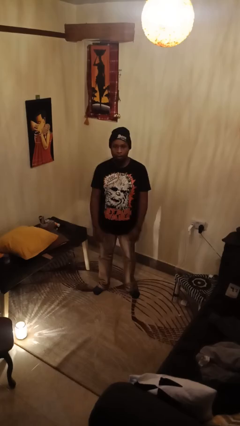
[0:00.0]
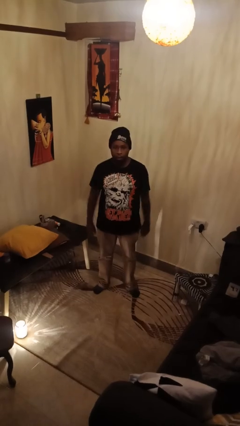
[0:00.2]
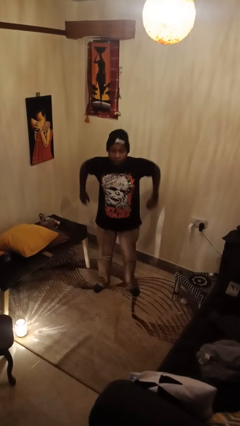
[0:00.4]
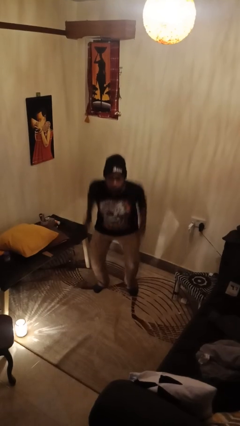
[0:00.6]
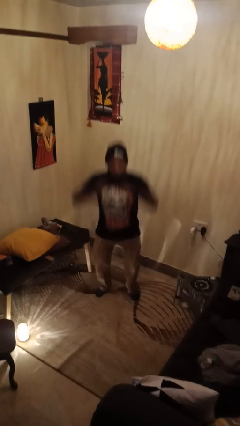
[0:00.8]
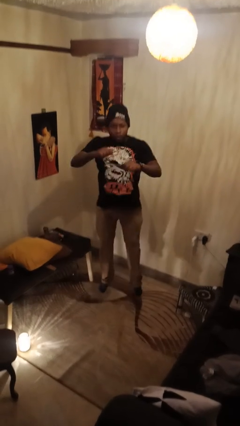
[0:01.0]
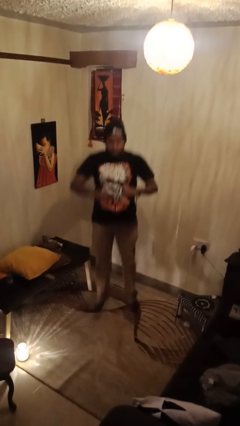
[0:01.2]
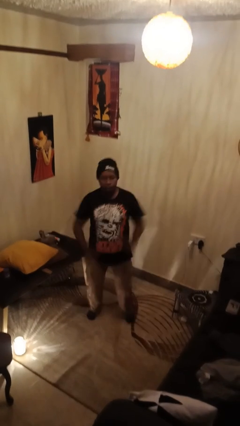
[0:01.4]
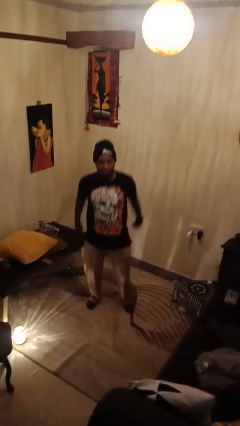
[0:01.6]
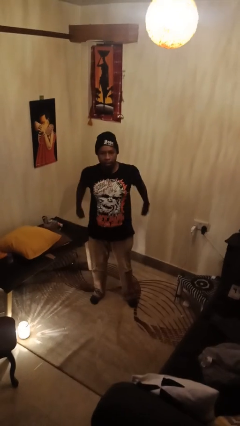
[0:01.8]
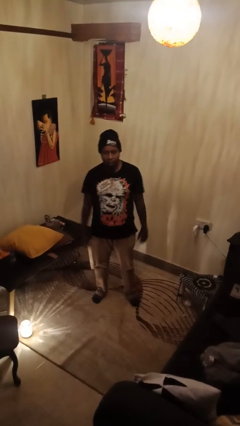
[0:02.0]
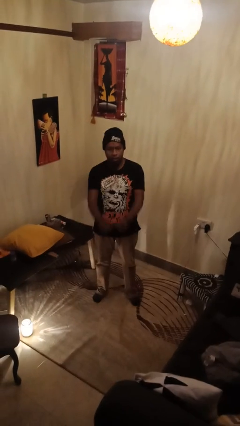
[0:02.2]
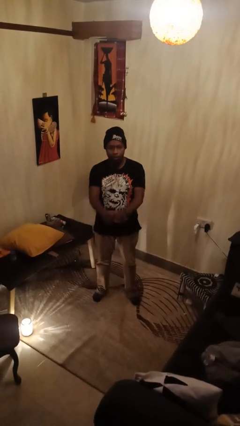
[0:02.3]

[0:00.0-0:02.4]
person jumps

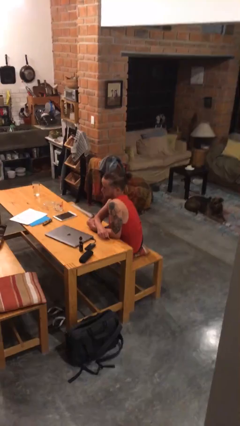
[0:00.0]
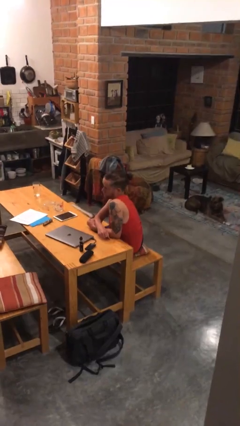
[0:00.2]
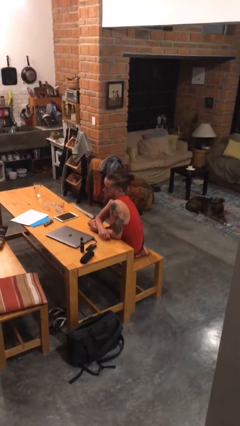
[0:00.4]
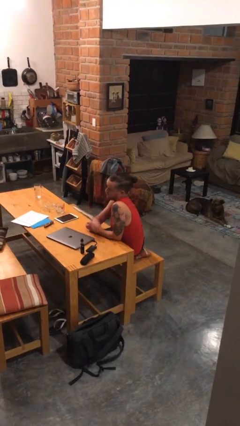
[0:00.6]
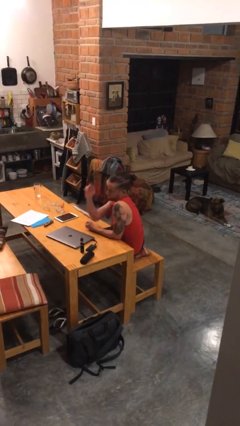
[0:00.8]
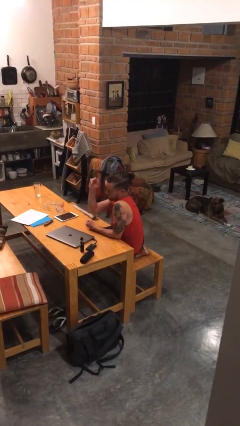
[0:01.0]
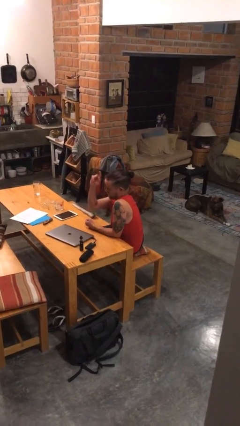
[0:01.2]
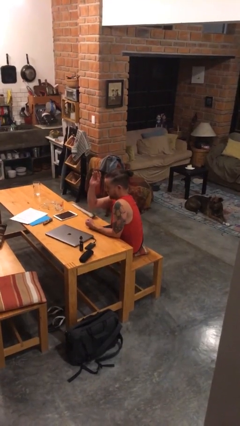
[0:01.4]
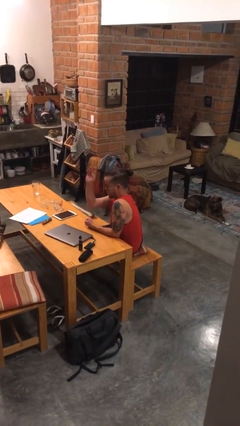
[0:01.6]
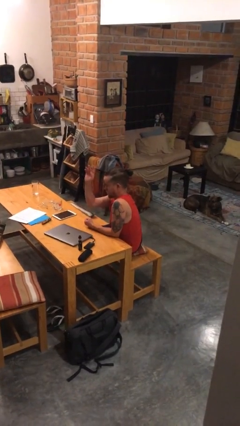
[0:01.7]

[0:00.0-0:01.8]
person gestures raise hand

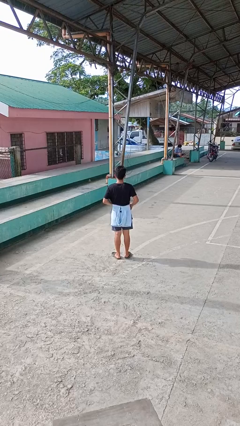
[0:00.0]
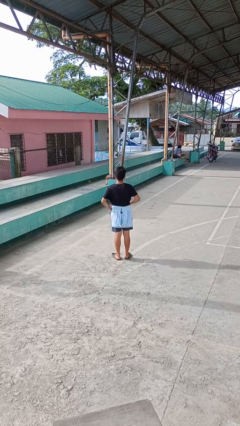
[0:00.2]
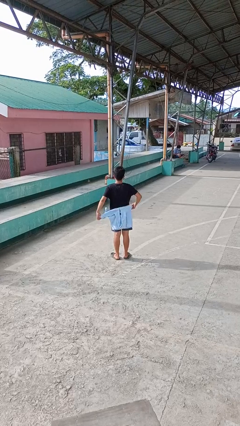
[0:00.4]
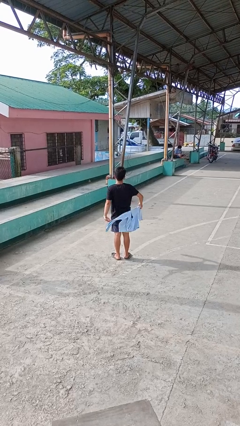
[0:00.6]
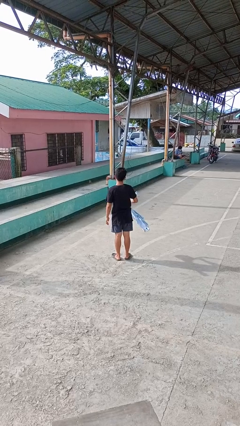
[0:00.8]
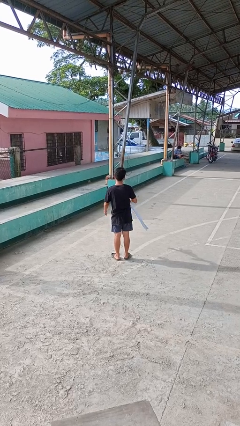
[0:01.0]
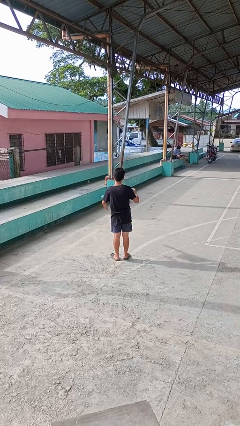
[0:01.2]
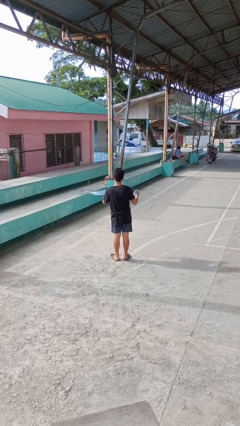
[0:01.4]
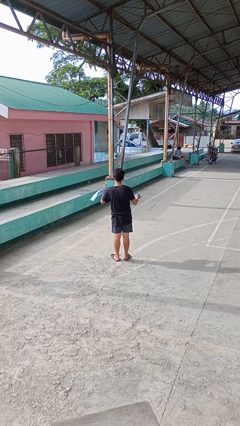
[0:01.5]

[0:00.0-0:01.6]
person unties jacket around waist

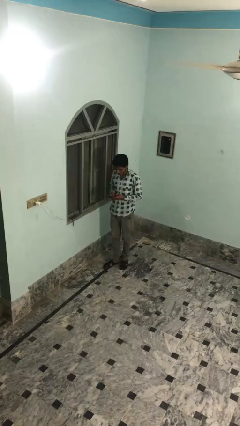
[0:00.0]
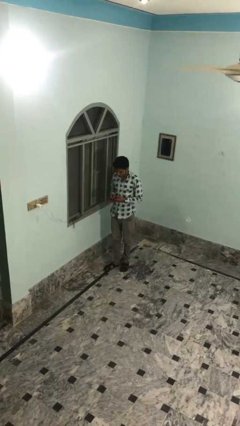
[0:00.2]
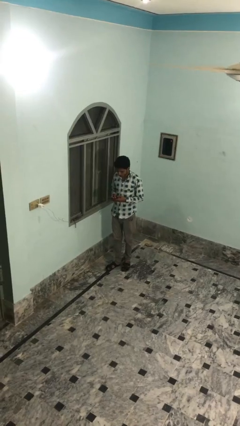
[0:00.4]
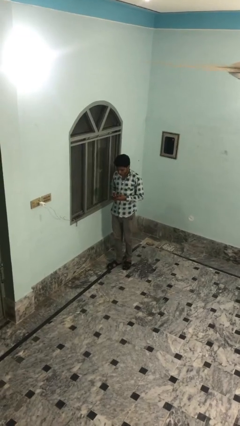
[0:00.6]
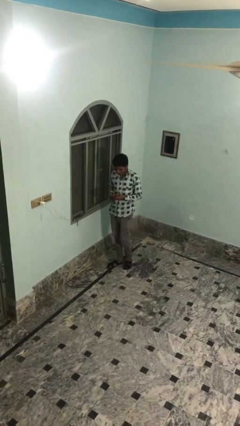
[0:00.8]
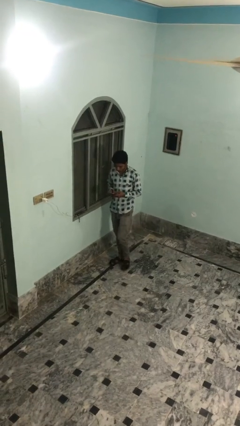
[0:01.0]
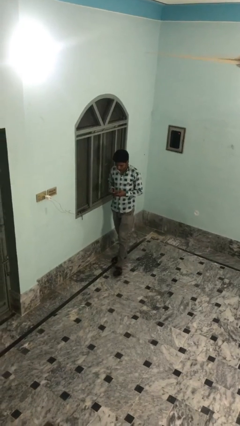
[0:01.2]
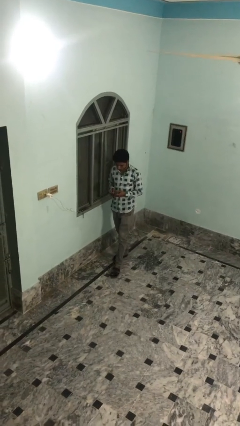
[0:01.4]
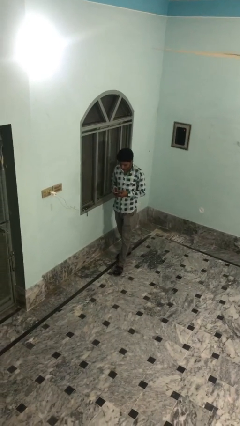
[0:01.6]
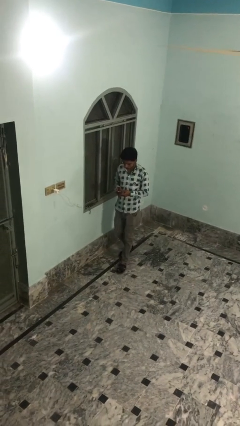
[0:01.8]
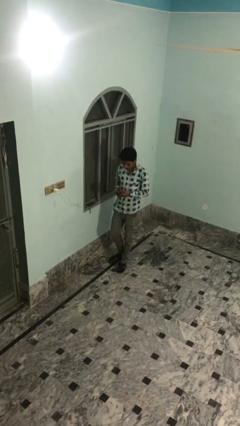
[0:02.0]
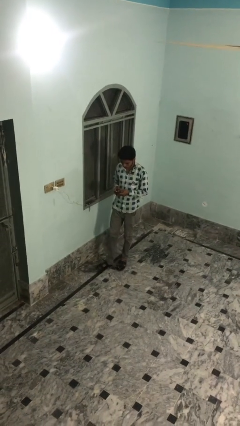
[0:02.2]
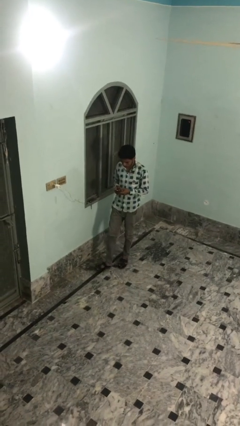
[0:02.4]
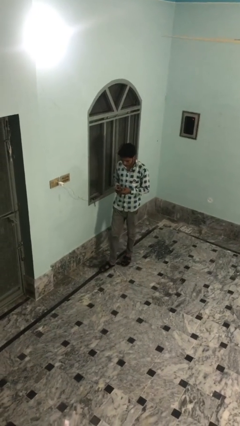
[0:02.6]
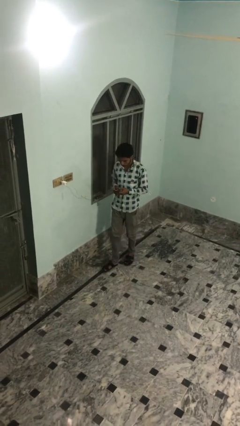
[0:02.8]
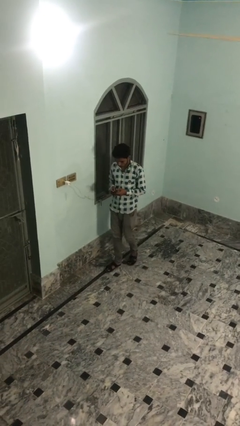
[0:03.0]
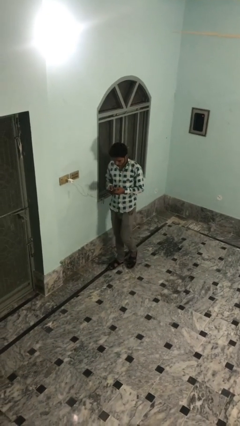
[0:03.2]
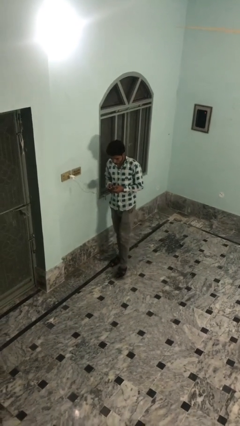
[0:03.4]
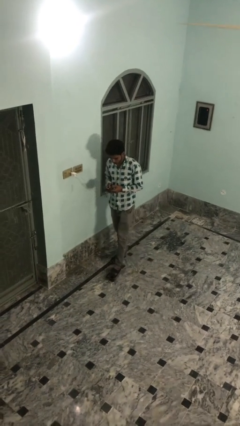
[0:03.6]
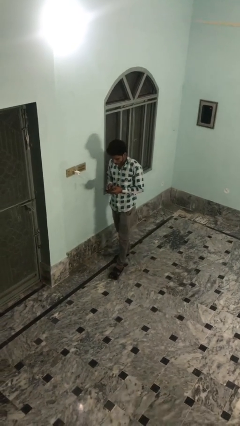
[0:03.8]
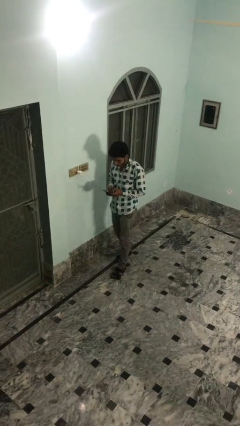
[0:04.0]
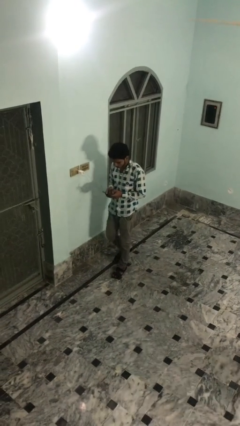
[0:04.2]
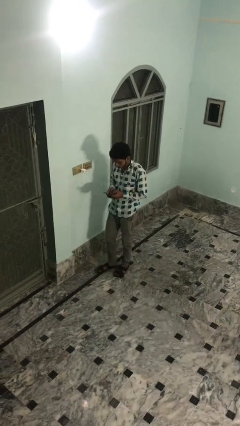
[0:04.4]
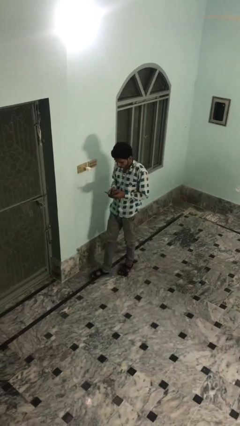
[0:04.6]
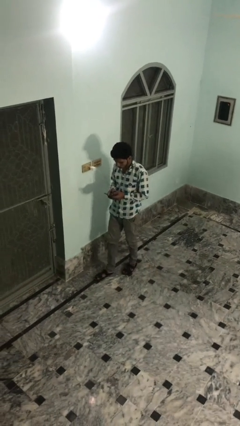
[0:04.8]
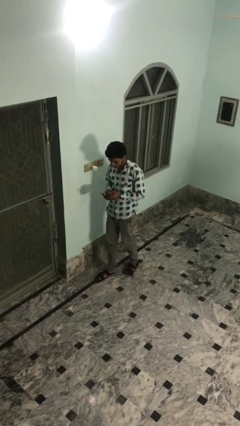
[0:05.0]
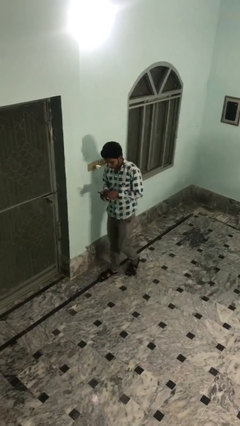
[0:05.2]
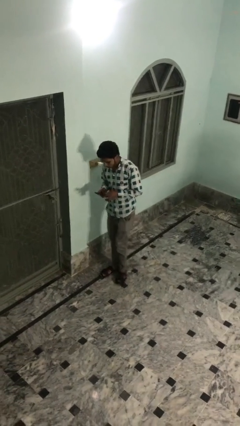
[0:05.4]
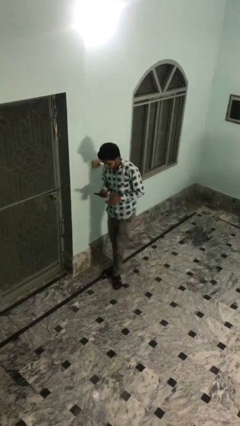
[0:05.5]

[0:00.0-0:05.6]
person texts on phone

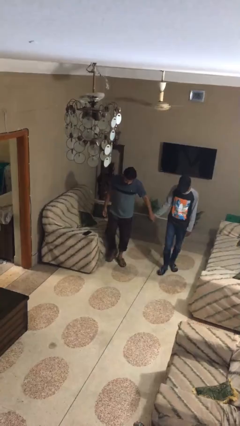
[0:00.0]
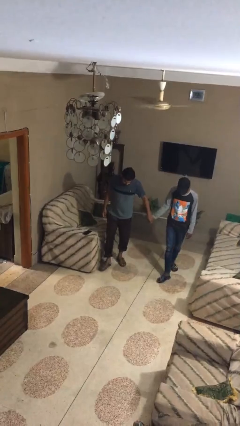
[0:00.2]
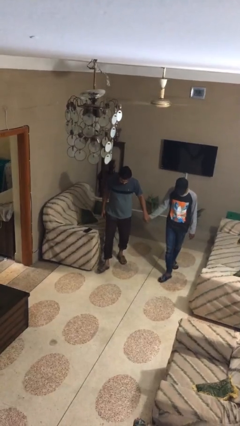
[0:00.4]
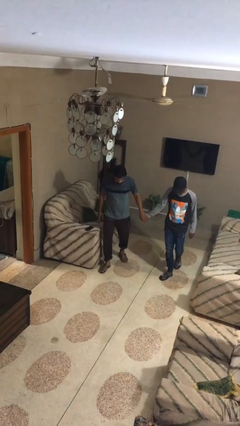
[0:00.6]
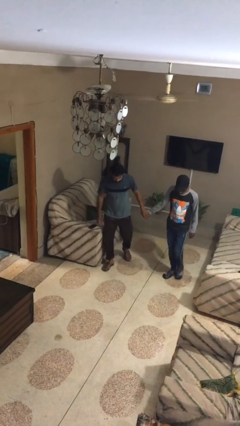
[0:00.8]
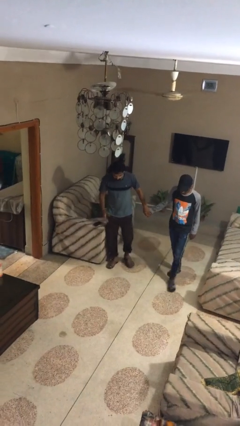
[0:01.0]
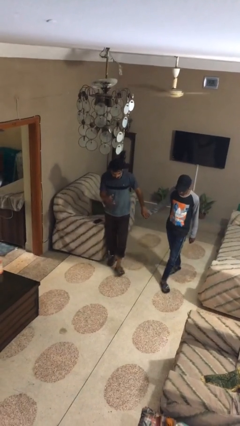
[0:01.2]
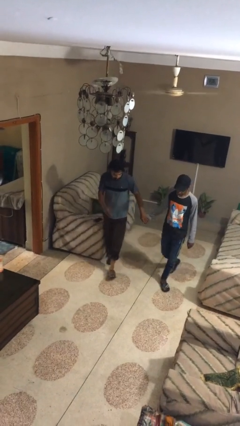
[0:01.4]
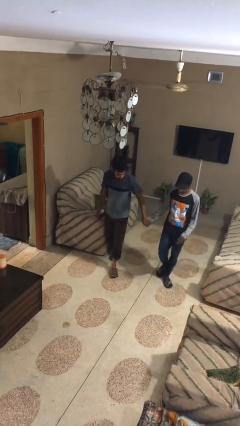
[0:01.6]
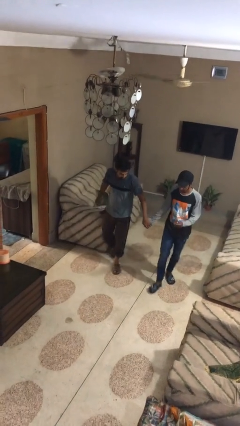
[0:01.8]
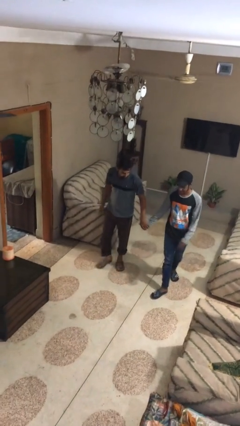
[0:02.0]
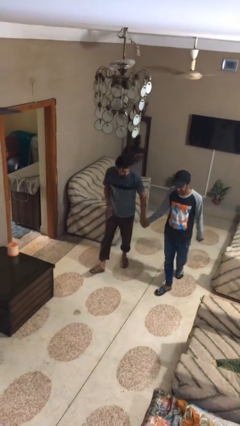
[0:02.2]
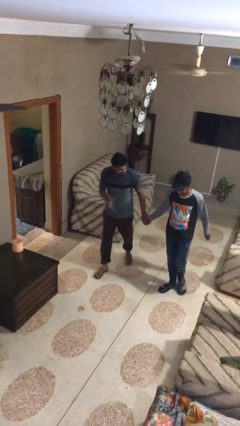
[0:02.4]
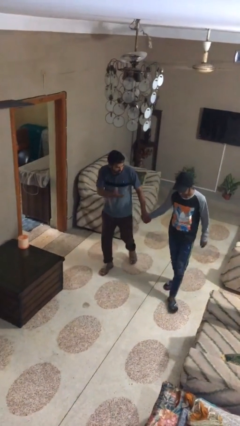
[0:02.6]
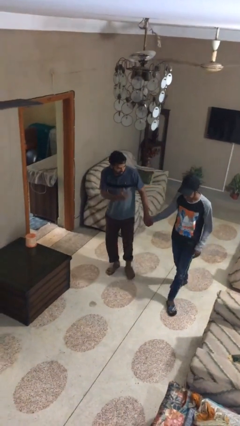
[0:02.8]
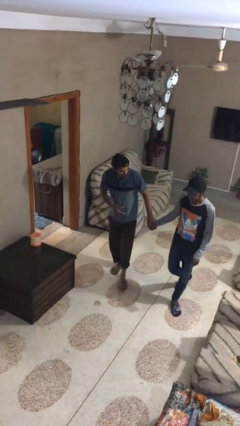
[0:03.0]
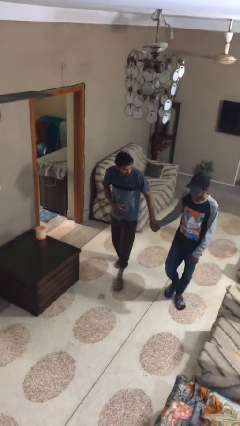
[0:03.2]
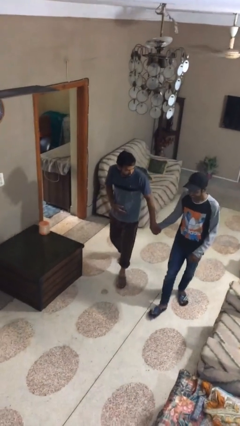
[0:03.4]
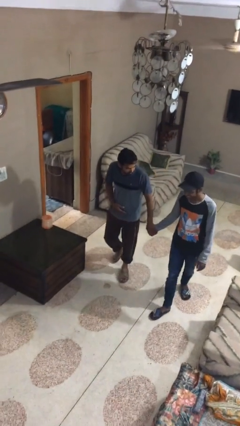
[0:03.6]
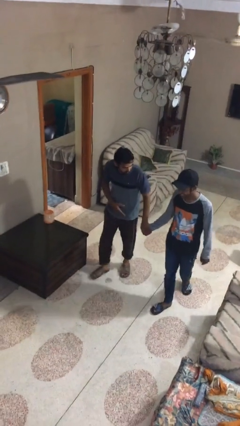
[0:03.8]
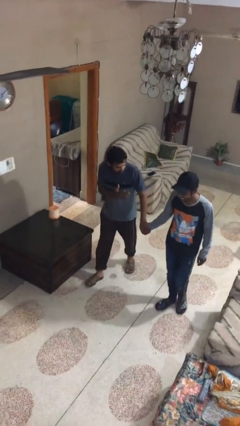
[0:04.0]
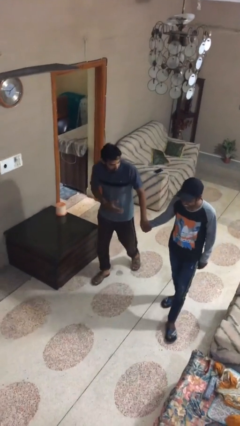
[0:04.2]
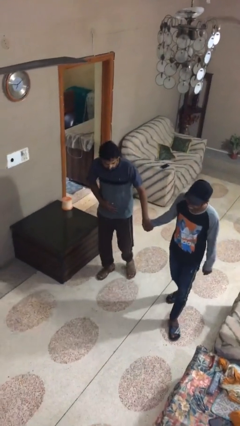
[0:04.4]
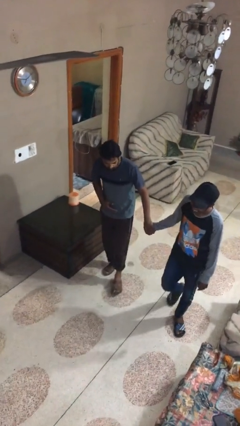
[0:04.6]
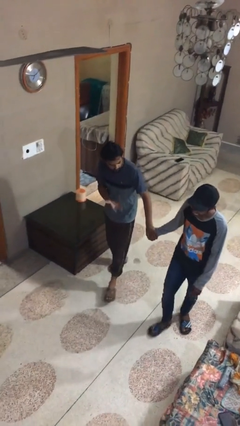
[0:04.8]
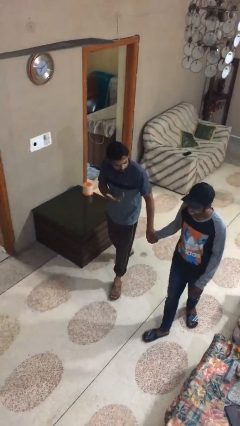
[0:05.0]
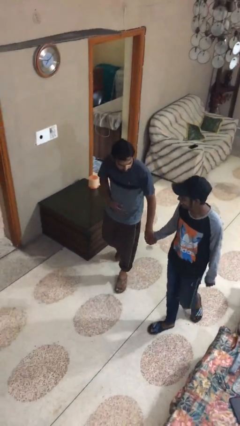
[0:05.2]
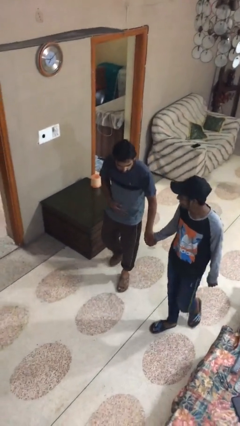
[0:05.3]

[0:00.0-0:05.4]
person holds hand

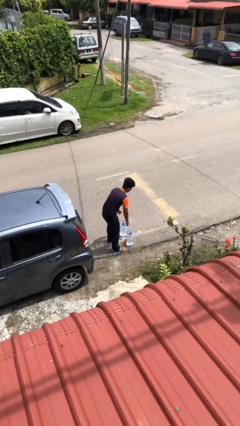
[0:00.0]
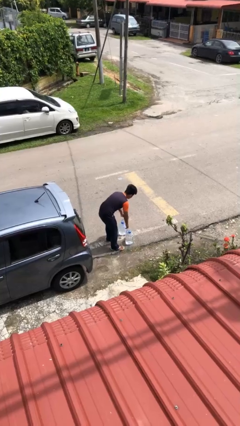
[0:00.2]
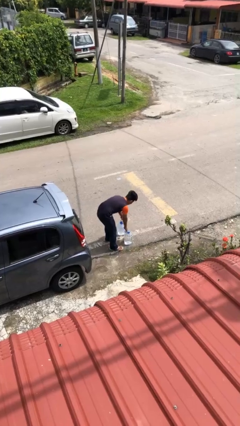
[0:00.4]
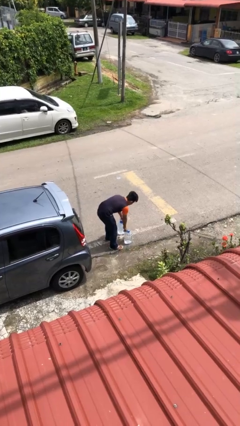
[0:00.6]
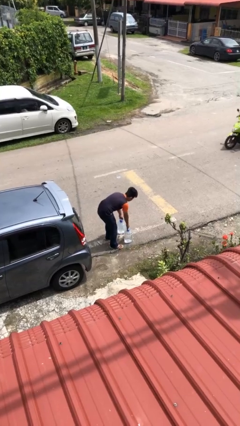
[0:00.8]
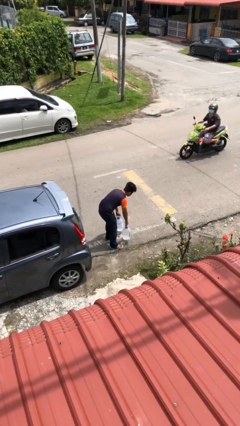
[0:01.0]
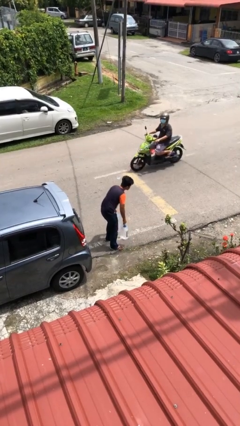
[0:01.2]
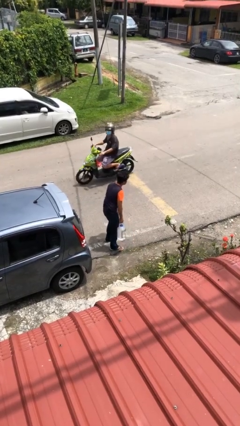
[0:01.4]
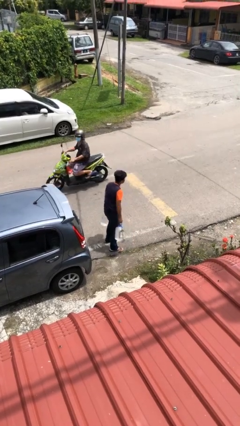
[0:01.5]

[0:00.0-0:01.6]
person picks up object from floor
